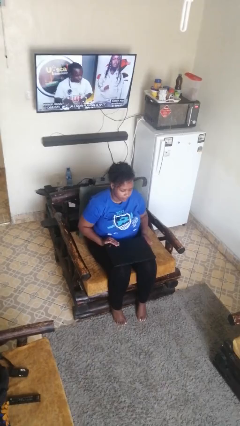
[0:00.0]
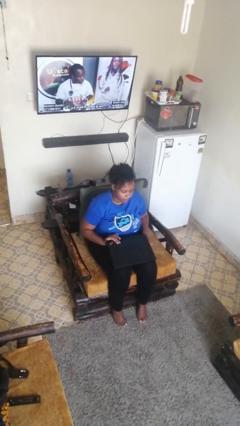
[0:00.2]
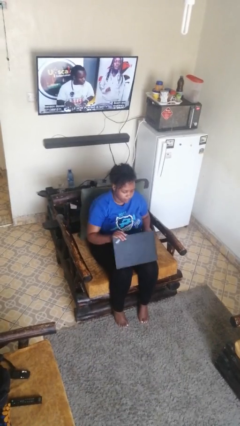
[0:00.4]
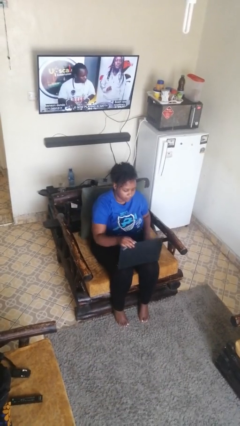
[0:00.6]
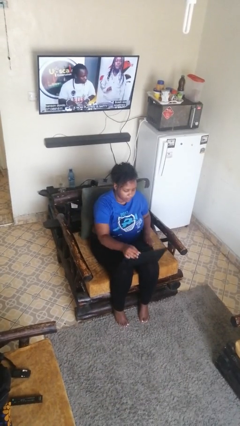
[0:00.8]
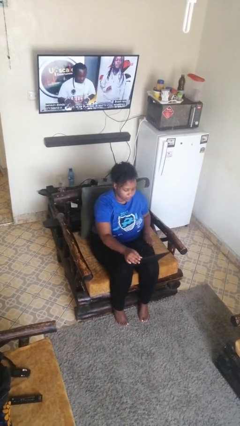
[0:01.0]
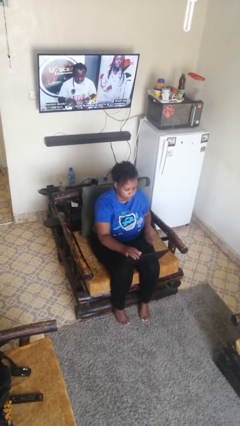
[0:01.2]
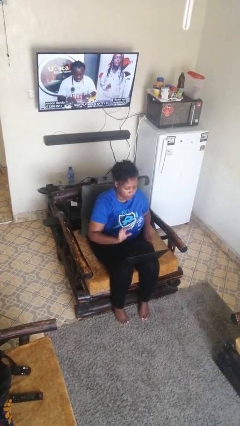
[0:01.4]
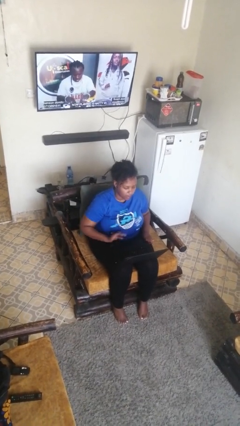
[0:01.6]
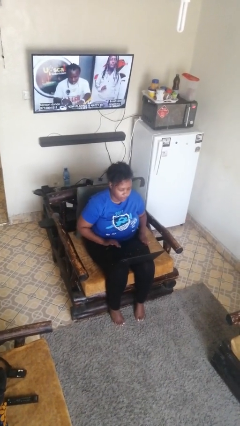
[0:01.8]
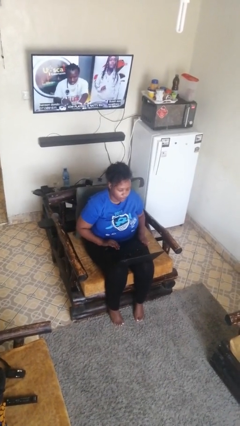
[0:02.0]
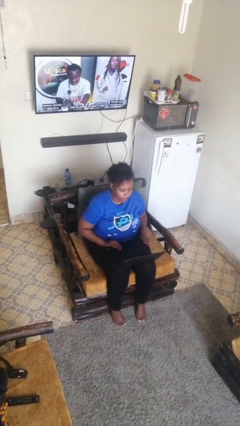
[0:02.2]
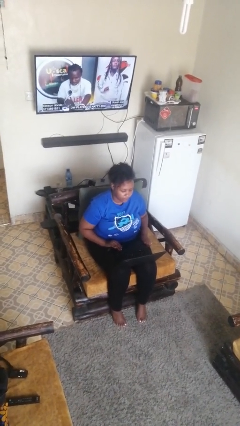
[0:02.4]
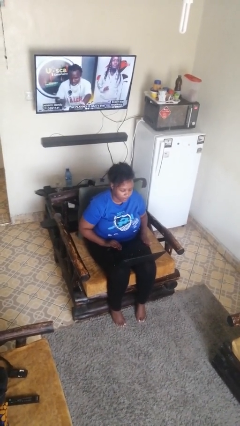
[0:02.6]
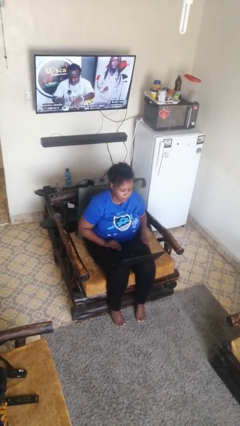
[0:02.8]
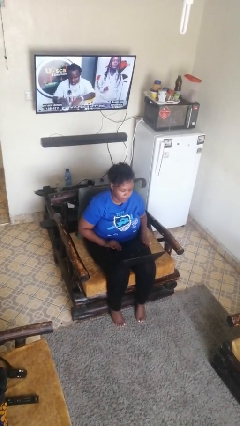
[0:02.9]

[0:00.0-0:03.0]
person opens laptop

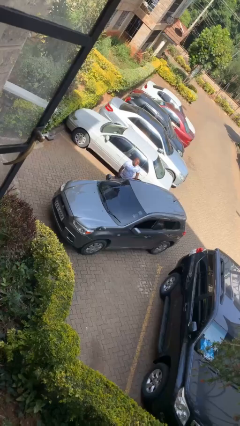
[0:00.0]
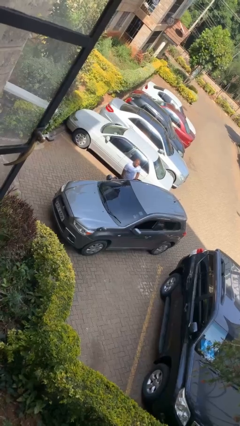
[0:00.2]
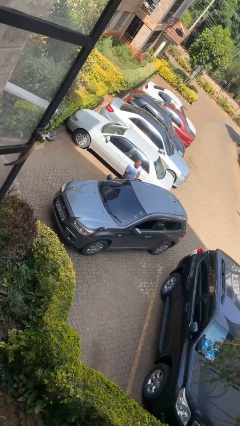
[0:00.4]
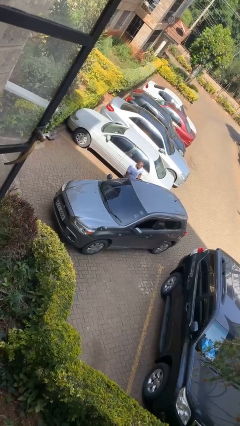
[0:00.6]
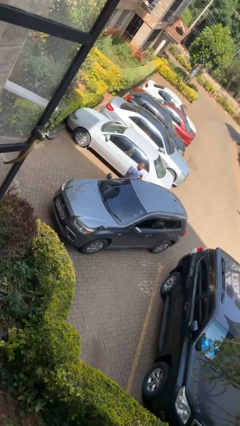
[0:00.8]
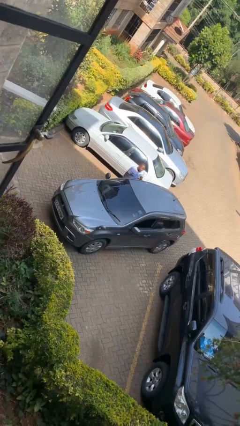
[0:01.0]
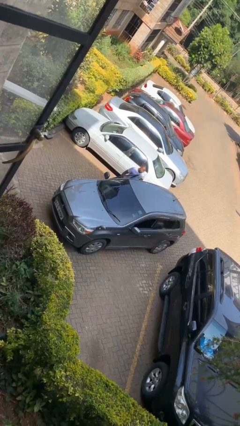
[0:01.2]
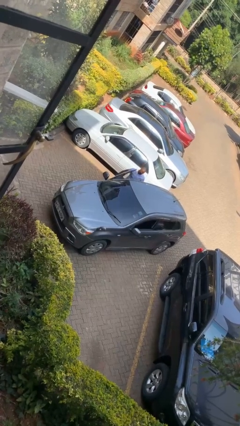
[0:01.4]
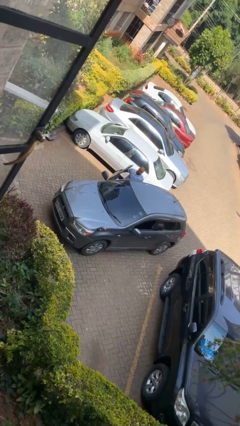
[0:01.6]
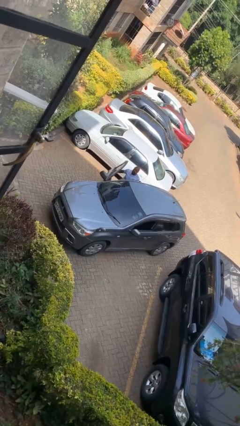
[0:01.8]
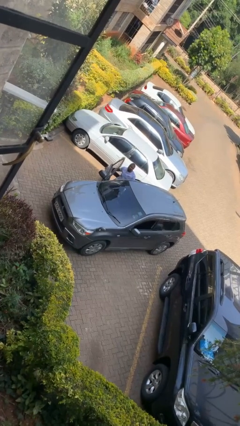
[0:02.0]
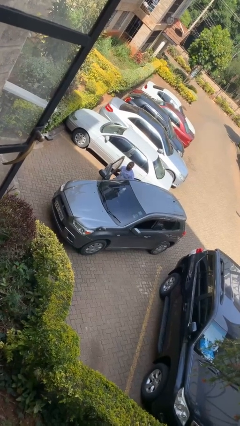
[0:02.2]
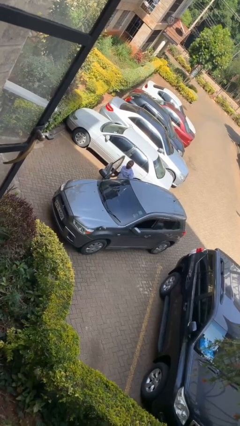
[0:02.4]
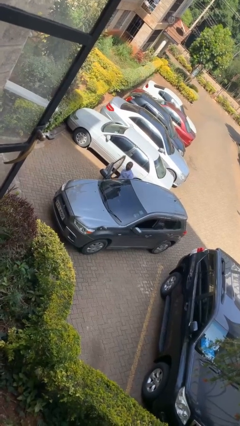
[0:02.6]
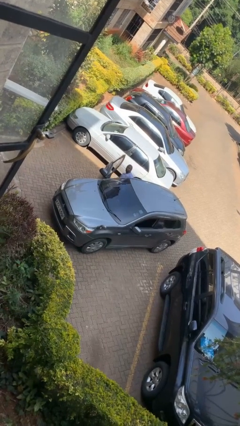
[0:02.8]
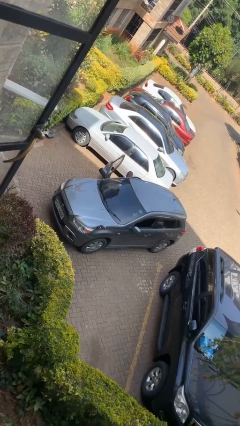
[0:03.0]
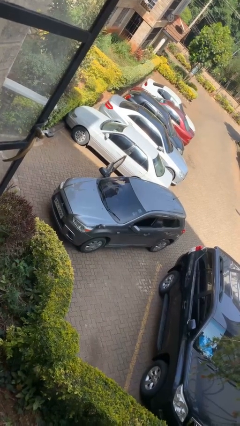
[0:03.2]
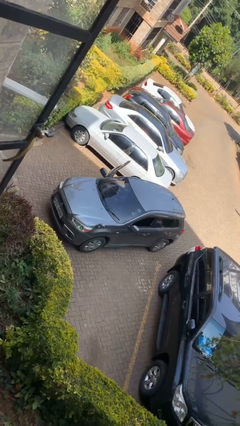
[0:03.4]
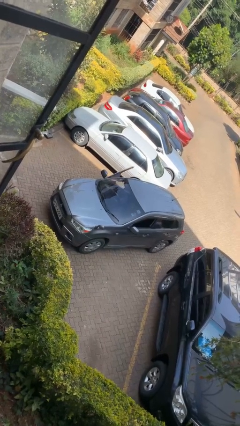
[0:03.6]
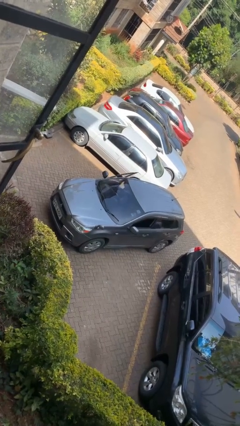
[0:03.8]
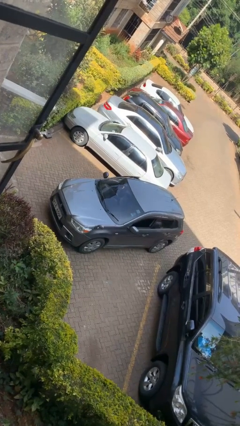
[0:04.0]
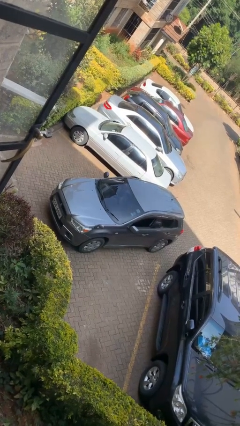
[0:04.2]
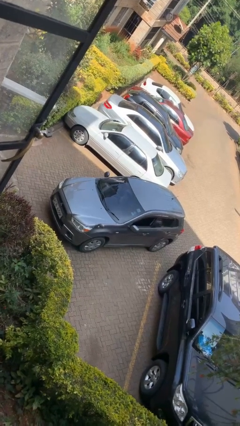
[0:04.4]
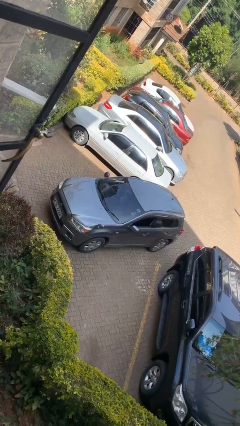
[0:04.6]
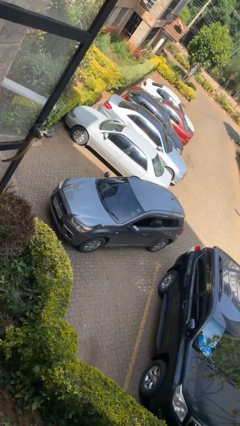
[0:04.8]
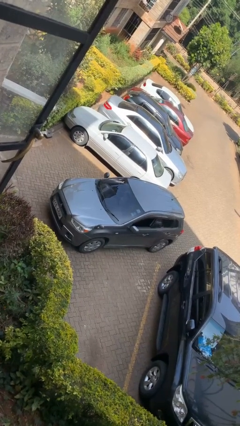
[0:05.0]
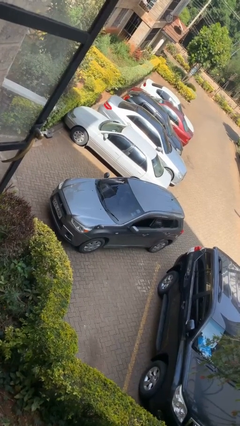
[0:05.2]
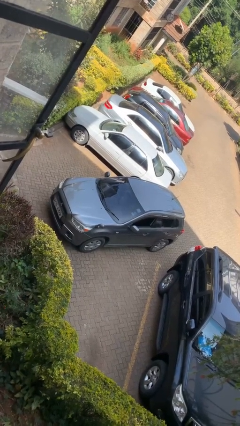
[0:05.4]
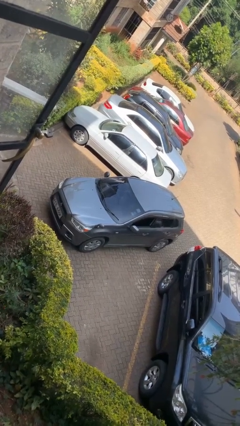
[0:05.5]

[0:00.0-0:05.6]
car picks up person

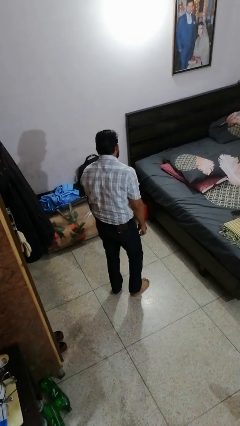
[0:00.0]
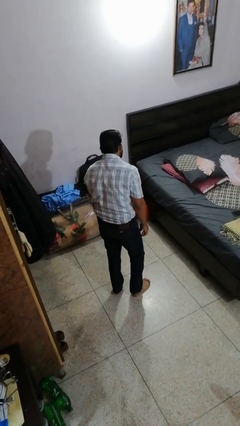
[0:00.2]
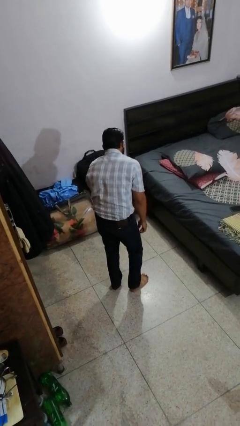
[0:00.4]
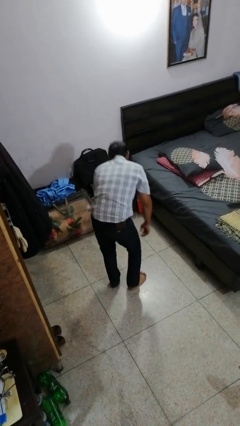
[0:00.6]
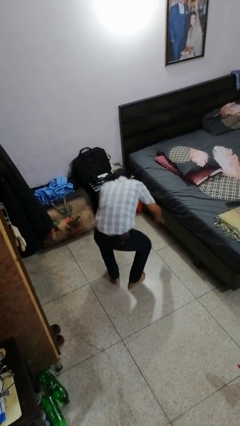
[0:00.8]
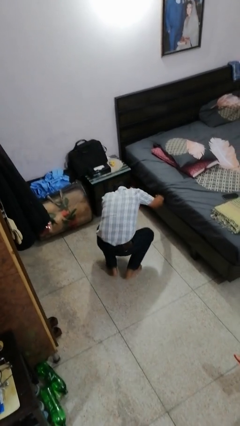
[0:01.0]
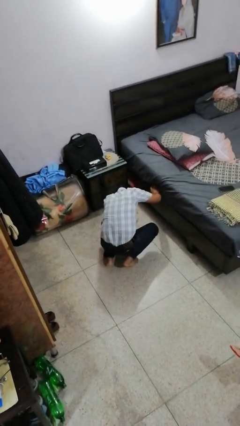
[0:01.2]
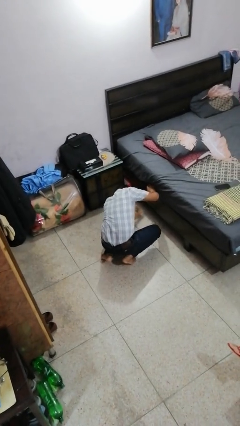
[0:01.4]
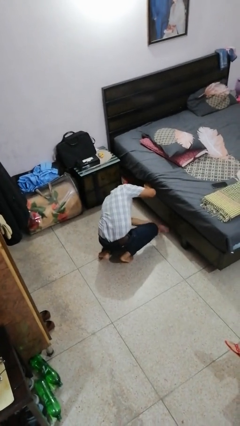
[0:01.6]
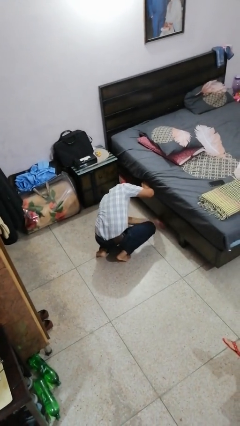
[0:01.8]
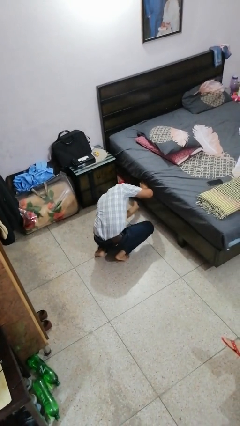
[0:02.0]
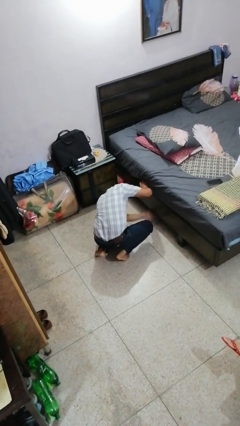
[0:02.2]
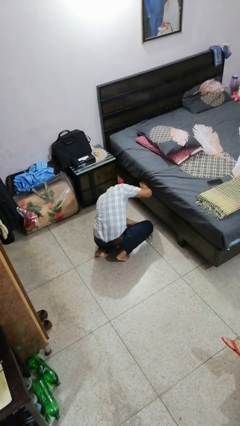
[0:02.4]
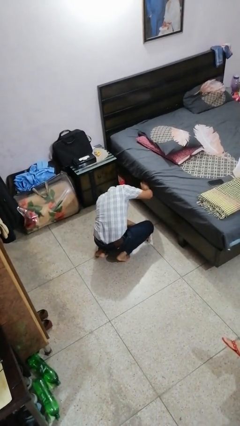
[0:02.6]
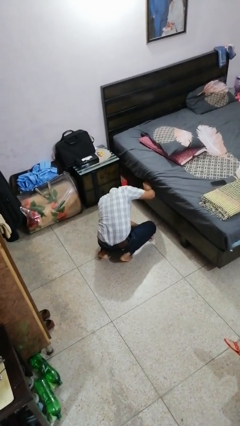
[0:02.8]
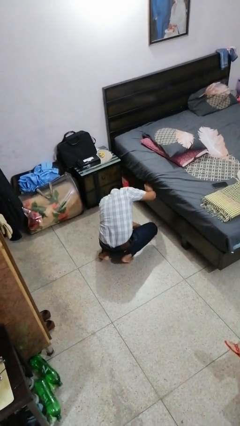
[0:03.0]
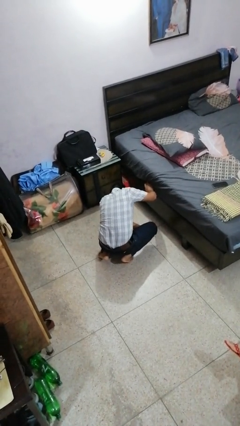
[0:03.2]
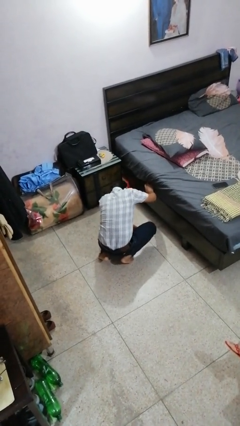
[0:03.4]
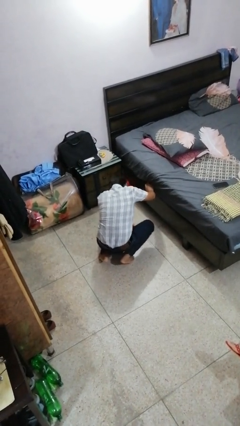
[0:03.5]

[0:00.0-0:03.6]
person searches under bed

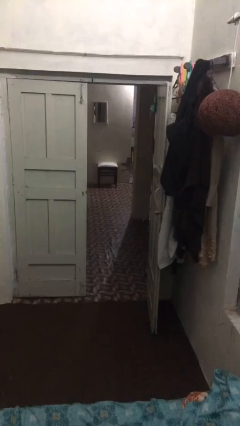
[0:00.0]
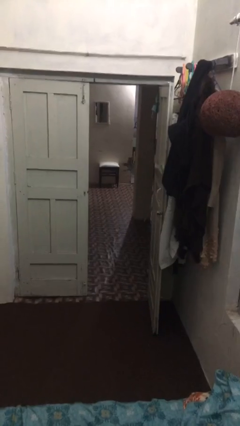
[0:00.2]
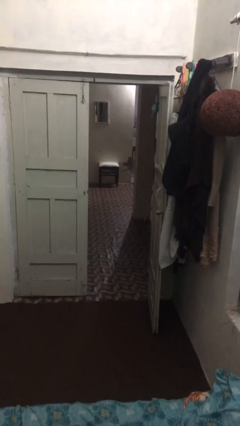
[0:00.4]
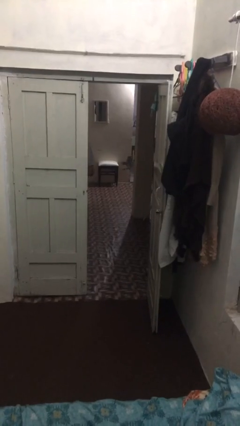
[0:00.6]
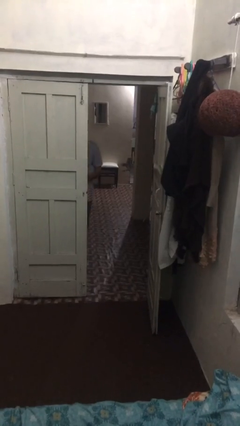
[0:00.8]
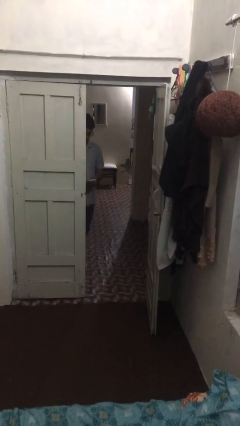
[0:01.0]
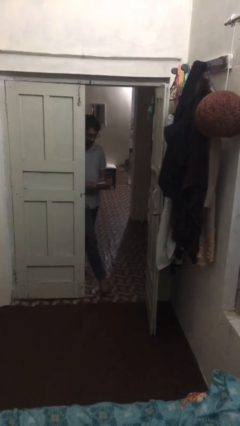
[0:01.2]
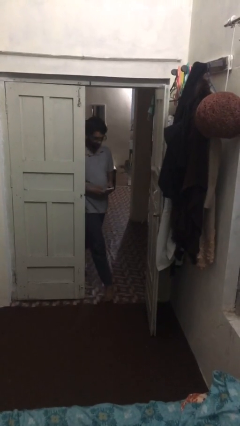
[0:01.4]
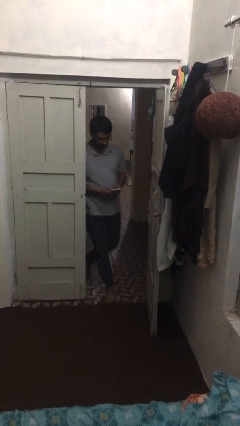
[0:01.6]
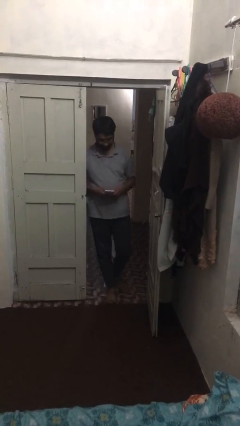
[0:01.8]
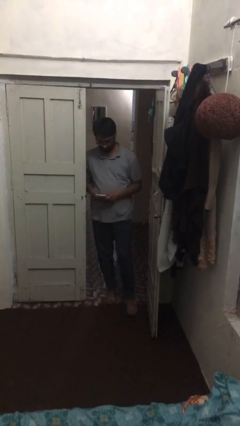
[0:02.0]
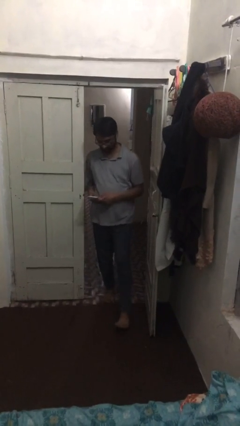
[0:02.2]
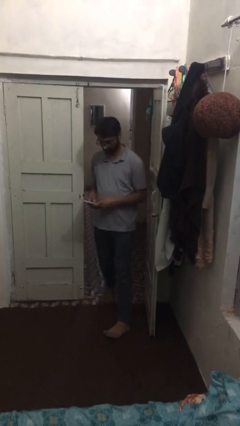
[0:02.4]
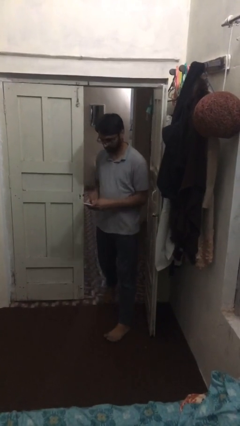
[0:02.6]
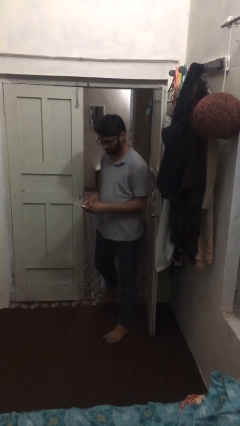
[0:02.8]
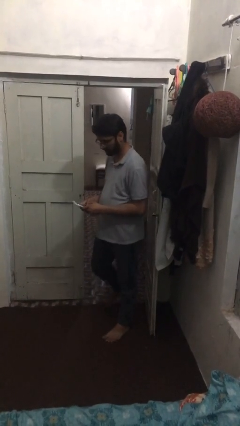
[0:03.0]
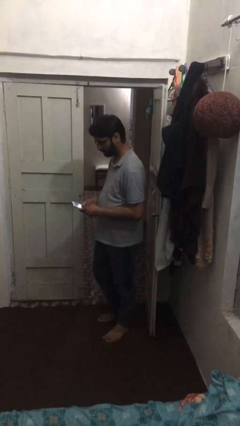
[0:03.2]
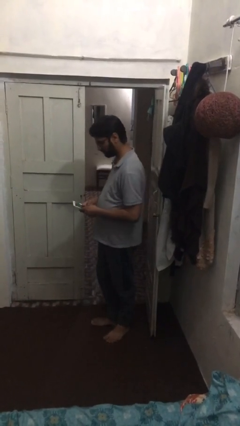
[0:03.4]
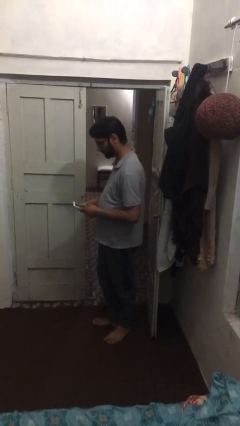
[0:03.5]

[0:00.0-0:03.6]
person enters scene through structure

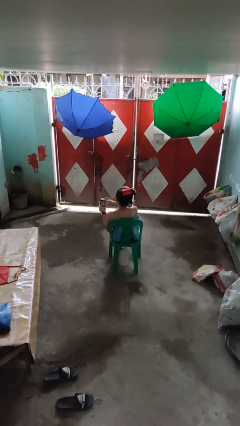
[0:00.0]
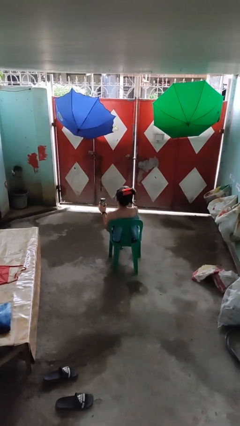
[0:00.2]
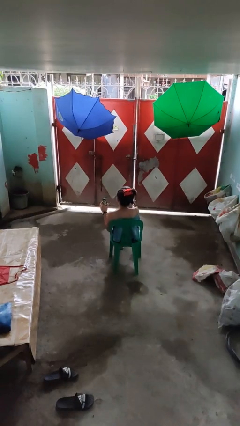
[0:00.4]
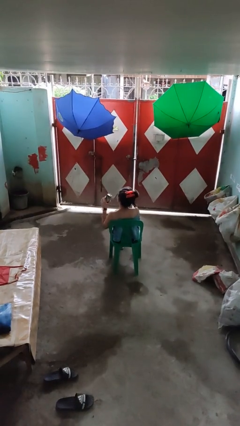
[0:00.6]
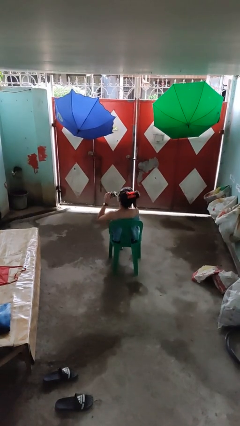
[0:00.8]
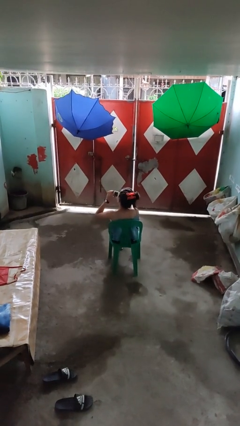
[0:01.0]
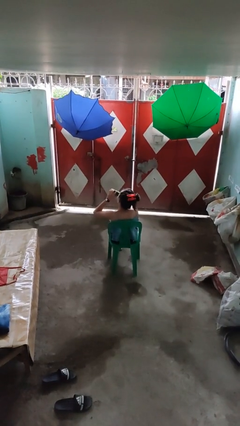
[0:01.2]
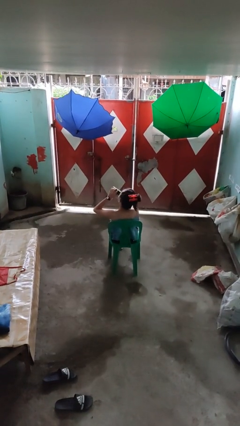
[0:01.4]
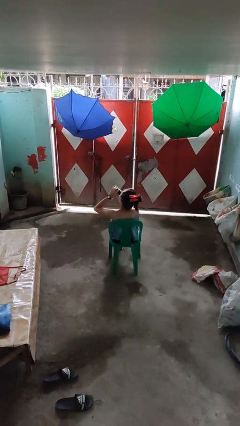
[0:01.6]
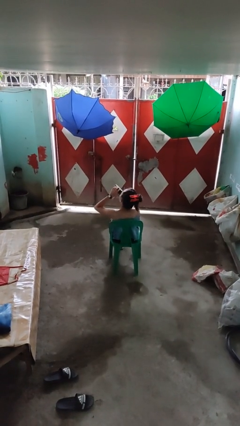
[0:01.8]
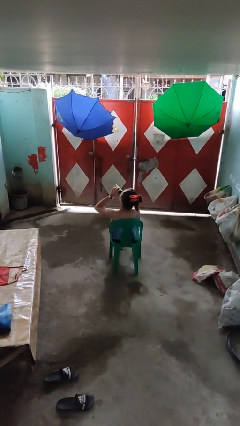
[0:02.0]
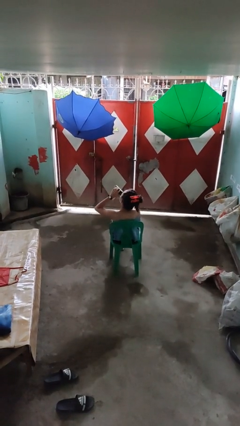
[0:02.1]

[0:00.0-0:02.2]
person drinks from beverage can
